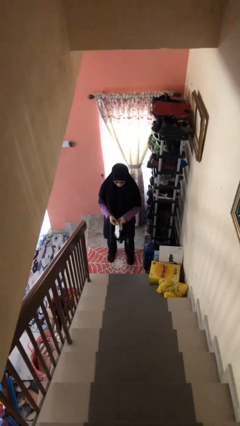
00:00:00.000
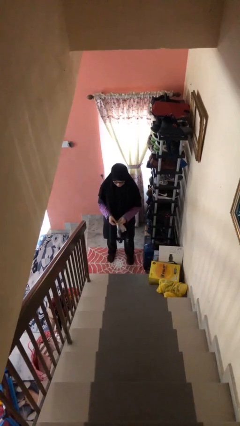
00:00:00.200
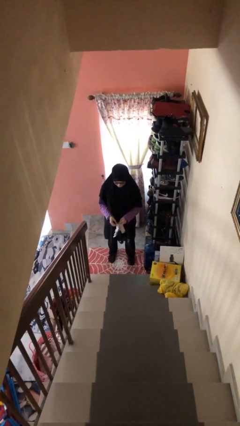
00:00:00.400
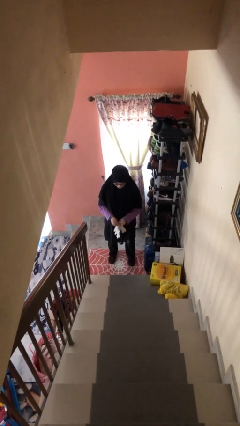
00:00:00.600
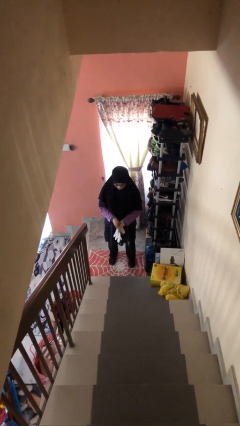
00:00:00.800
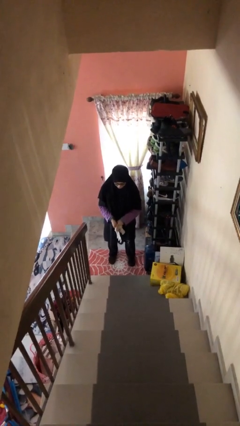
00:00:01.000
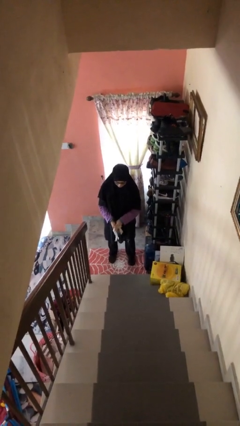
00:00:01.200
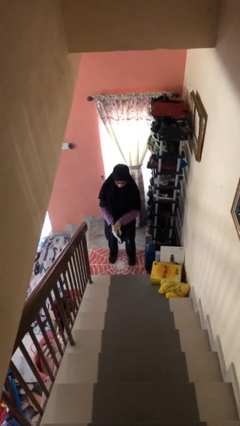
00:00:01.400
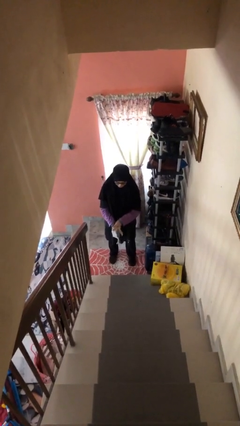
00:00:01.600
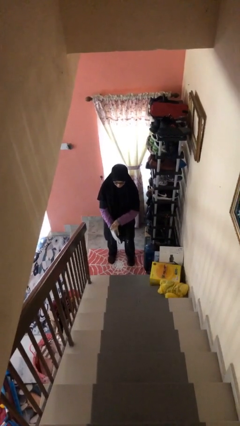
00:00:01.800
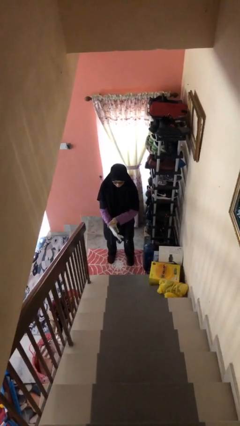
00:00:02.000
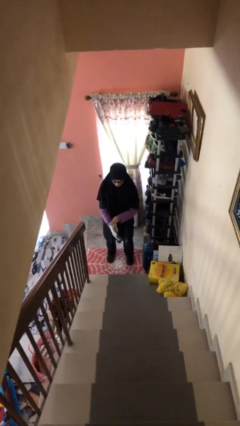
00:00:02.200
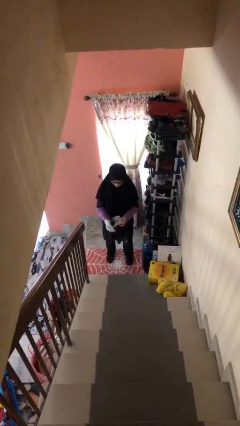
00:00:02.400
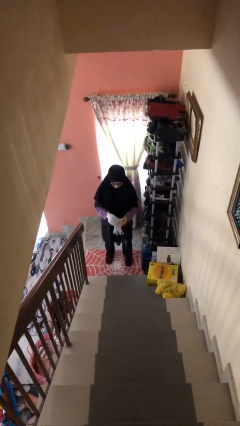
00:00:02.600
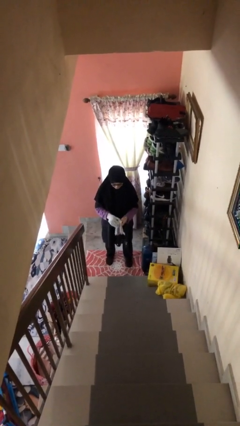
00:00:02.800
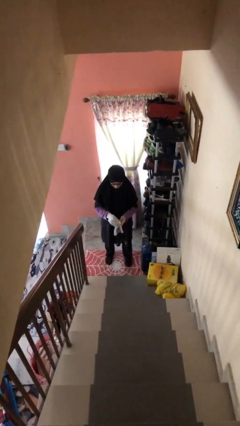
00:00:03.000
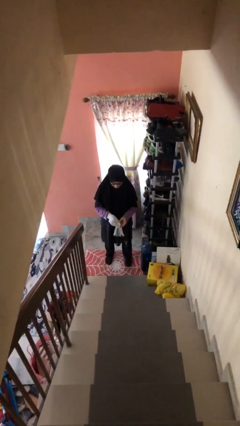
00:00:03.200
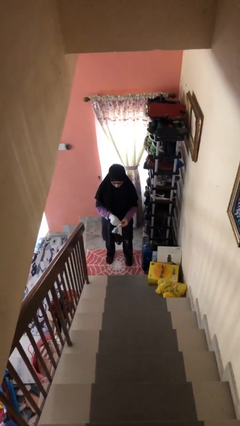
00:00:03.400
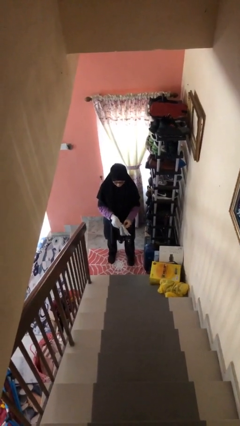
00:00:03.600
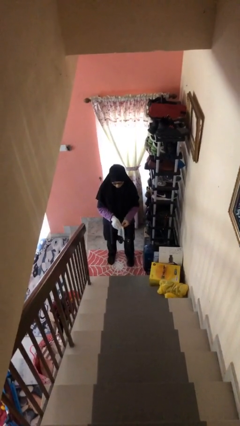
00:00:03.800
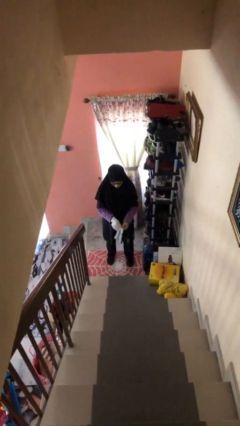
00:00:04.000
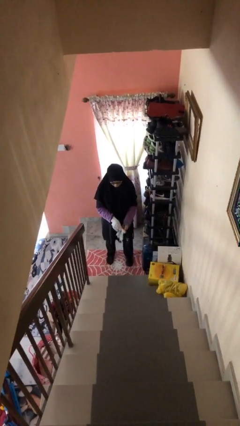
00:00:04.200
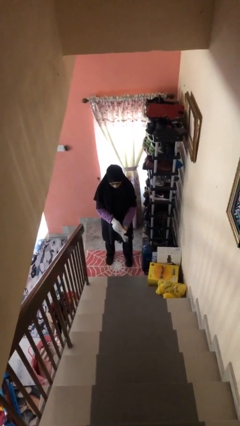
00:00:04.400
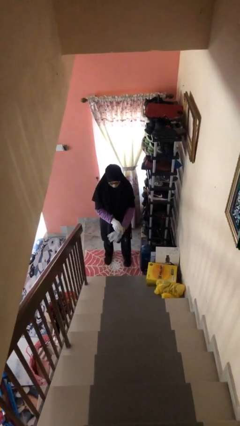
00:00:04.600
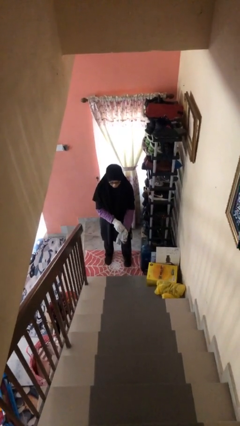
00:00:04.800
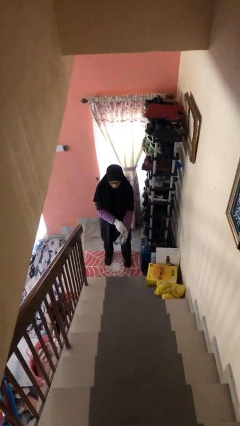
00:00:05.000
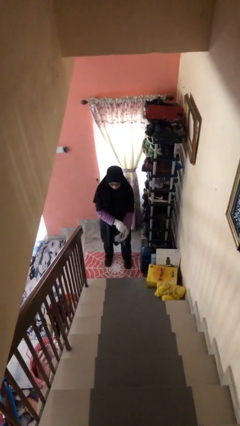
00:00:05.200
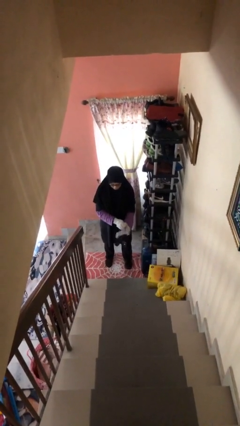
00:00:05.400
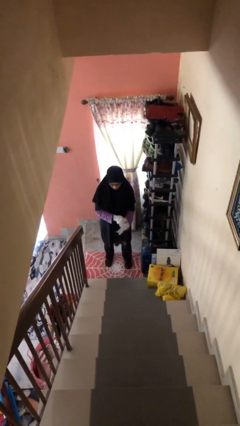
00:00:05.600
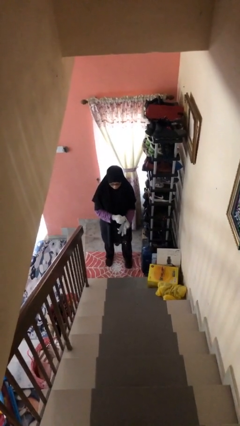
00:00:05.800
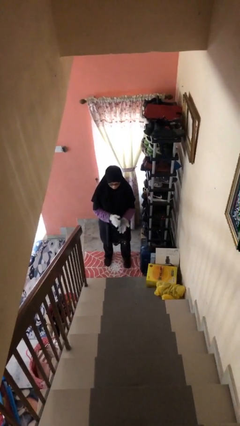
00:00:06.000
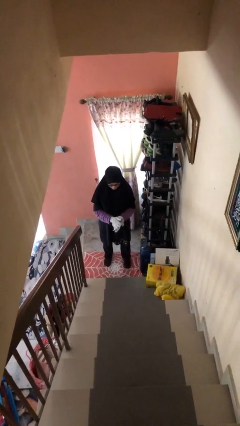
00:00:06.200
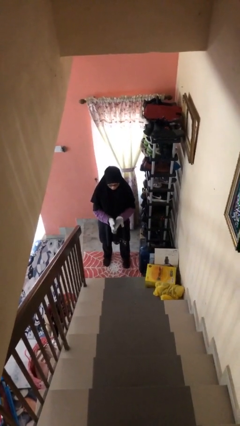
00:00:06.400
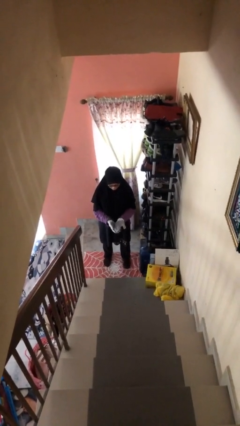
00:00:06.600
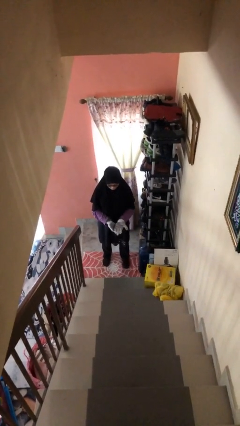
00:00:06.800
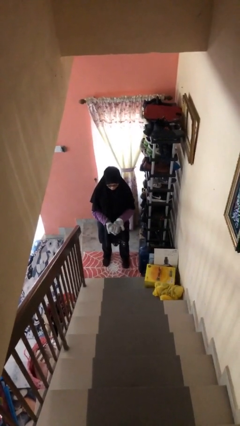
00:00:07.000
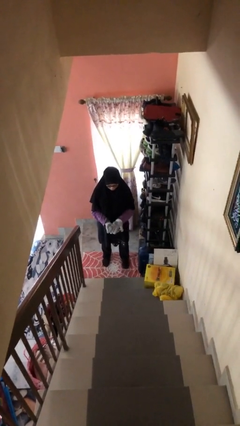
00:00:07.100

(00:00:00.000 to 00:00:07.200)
person puts on gloves

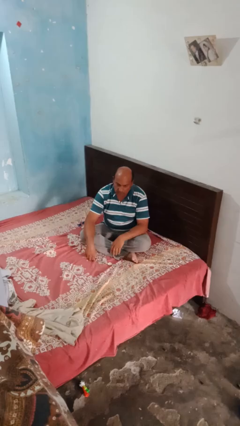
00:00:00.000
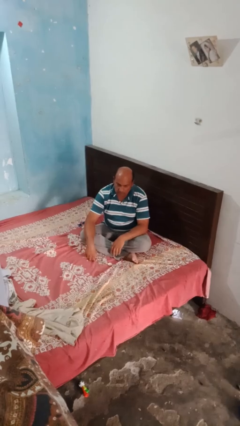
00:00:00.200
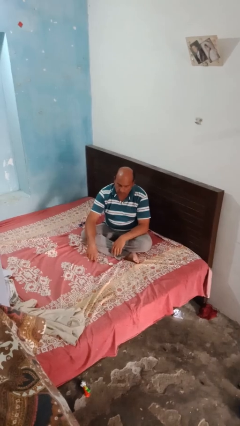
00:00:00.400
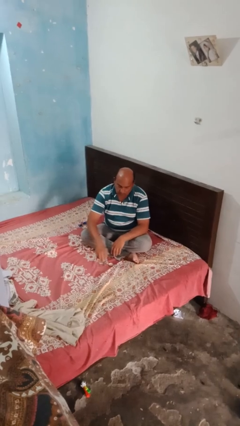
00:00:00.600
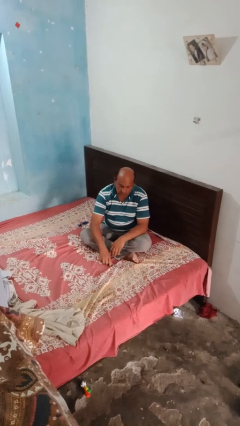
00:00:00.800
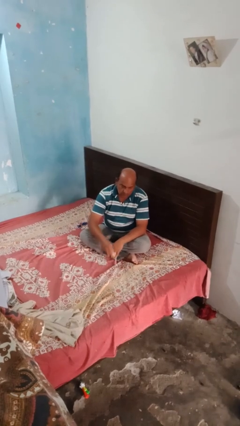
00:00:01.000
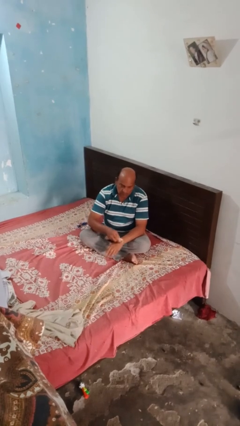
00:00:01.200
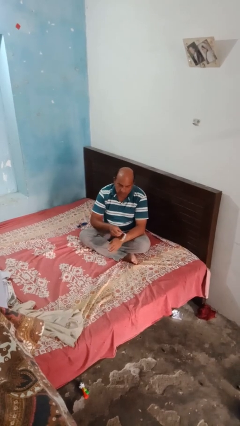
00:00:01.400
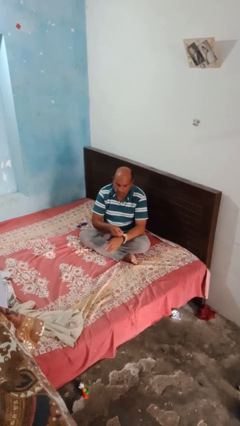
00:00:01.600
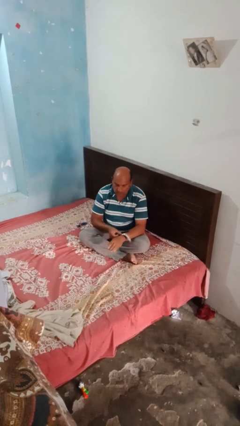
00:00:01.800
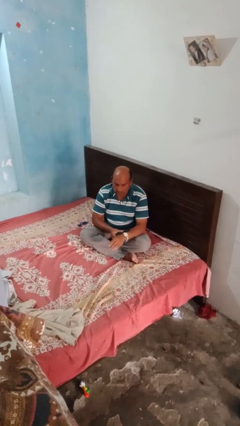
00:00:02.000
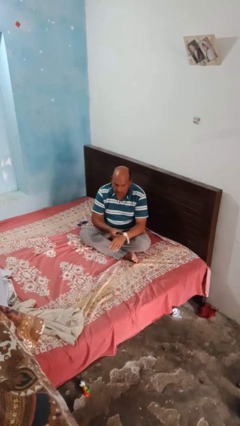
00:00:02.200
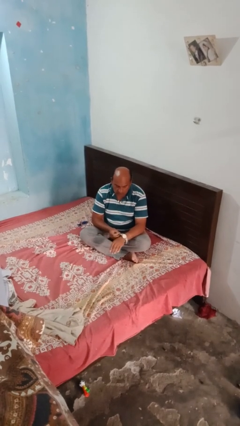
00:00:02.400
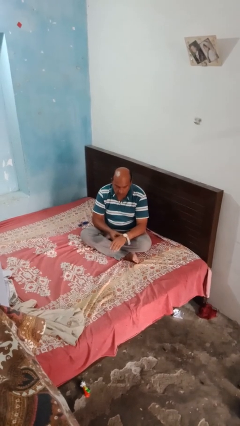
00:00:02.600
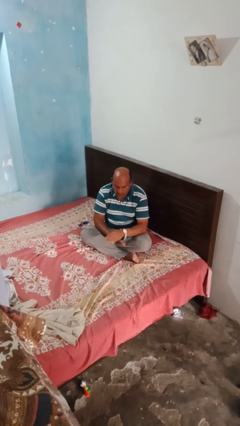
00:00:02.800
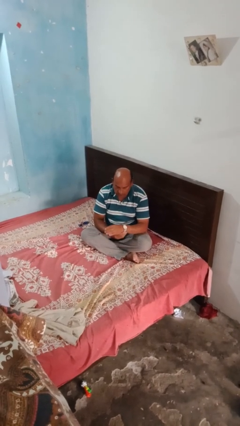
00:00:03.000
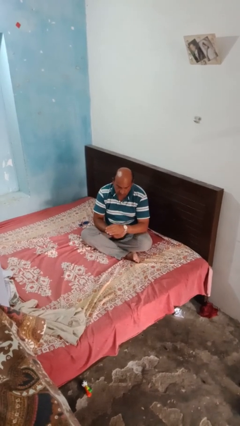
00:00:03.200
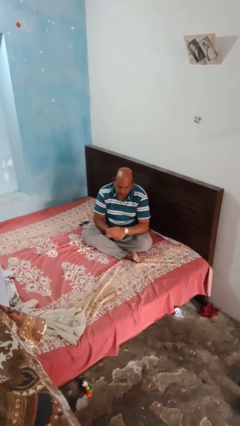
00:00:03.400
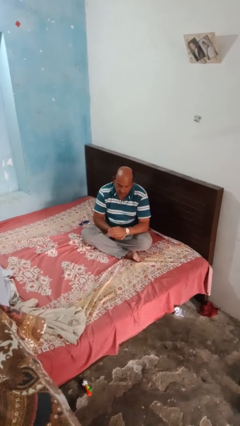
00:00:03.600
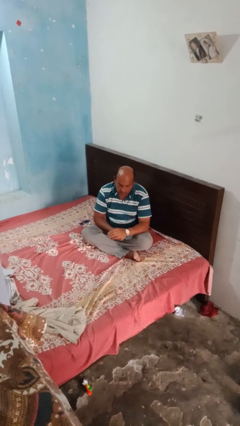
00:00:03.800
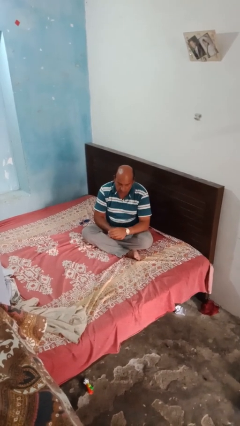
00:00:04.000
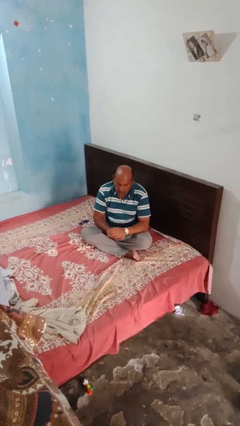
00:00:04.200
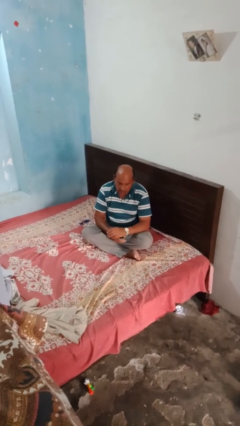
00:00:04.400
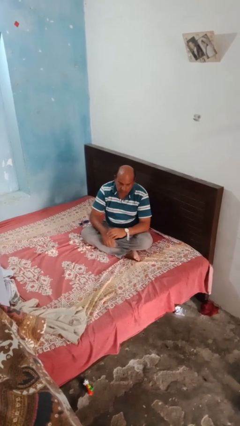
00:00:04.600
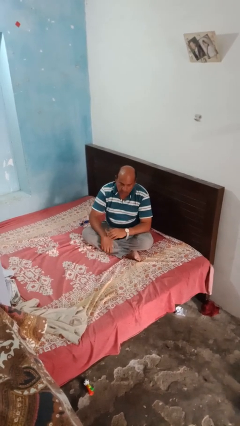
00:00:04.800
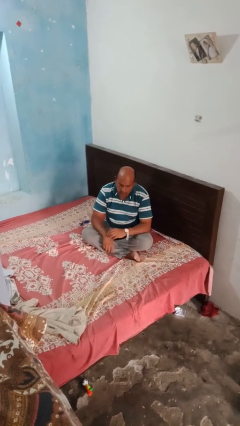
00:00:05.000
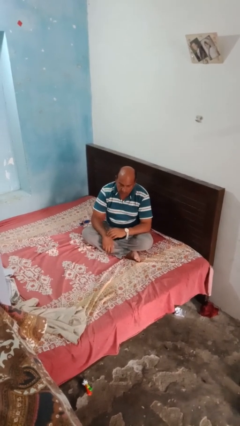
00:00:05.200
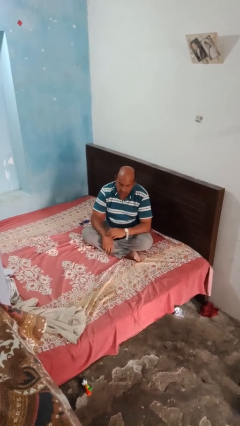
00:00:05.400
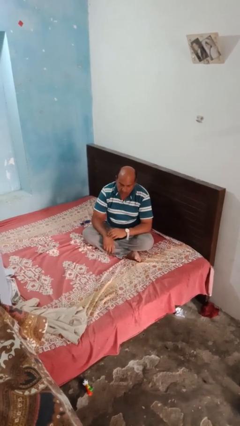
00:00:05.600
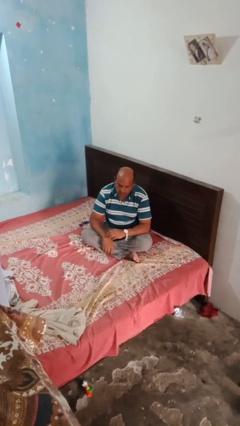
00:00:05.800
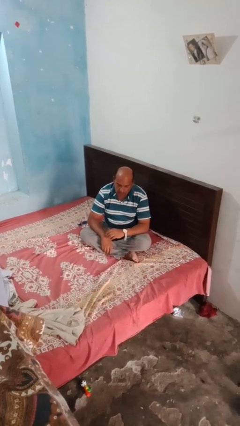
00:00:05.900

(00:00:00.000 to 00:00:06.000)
person puts on wristwatch

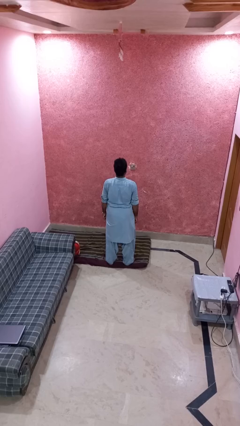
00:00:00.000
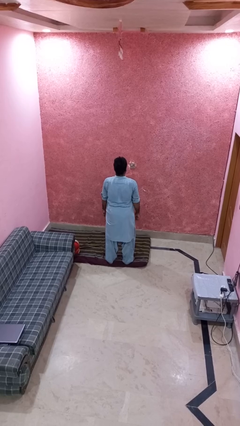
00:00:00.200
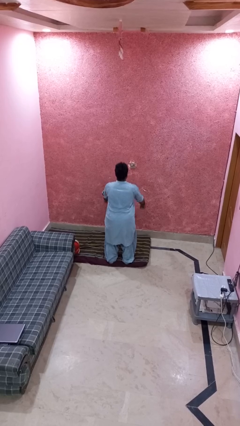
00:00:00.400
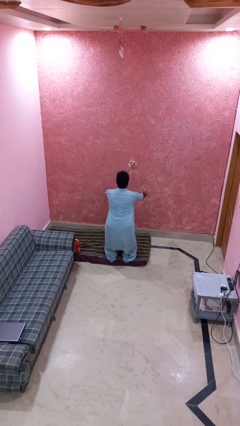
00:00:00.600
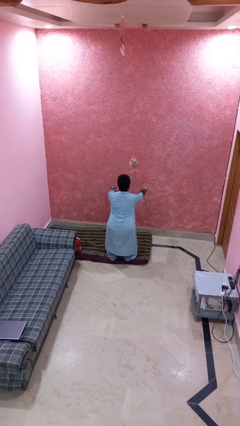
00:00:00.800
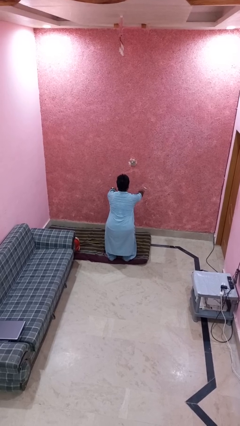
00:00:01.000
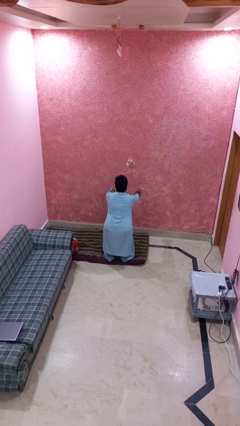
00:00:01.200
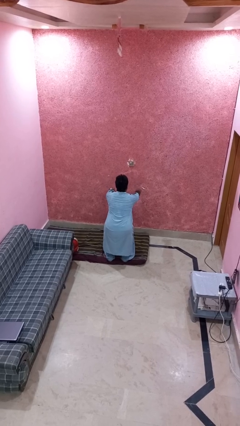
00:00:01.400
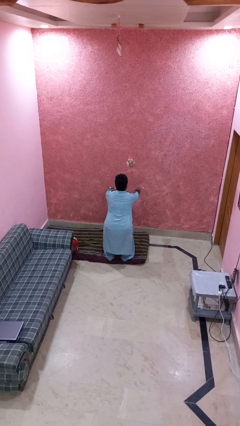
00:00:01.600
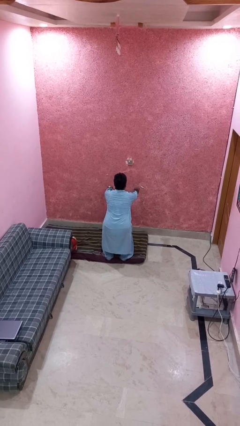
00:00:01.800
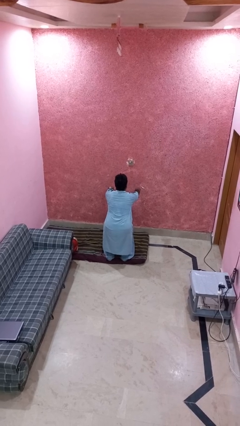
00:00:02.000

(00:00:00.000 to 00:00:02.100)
person squats

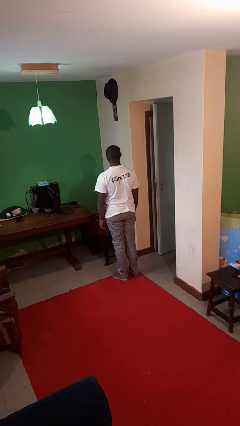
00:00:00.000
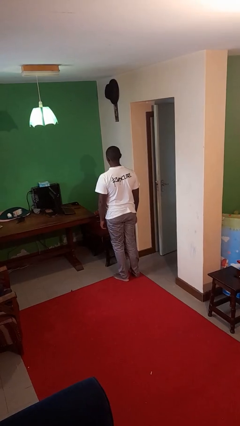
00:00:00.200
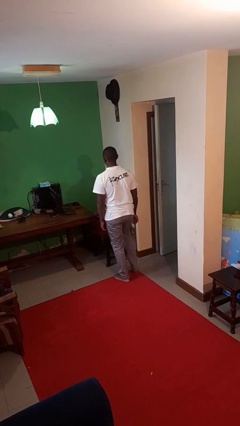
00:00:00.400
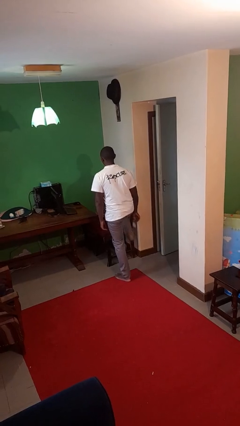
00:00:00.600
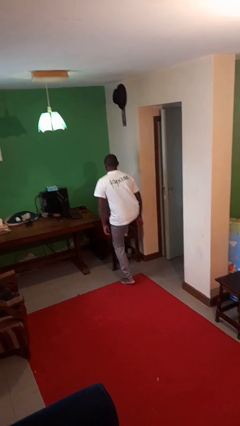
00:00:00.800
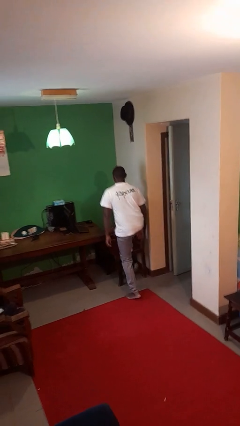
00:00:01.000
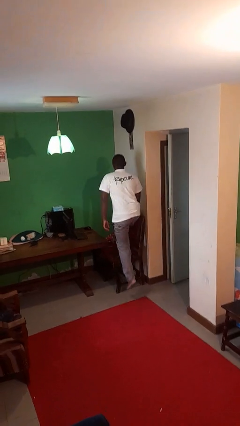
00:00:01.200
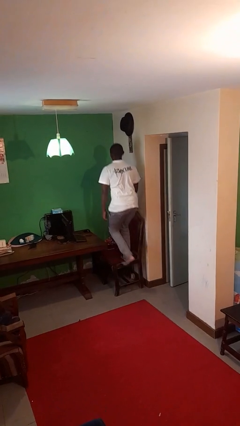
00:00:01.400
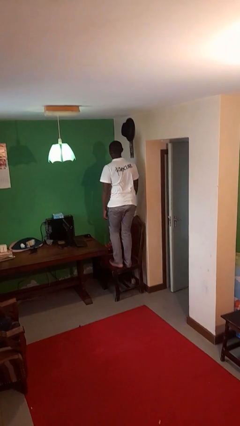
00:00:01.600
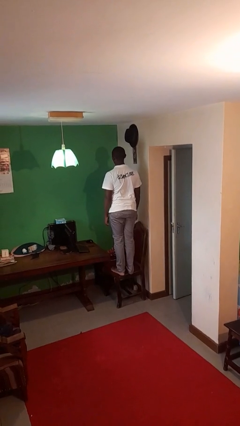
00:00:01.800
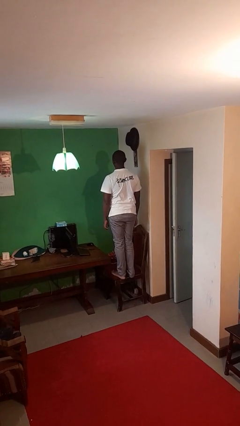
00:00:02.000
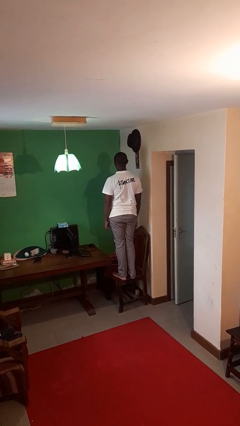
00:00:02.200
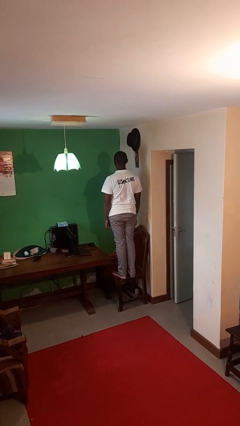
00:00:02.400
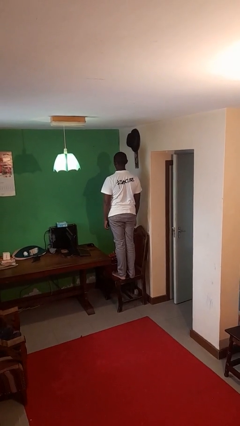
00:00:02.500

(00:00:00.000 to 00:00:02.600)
person climbs on chair
